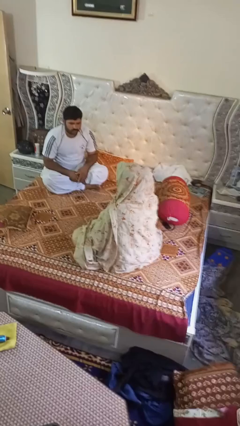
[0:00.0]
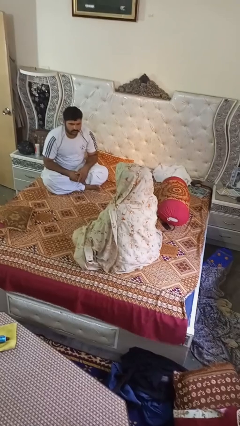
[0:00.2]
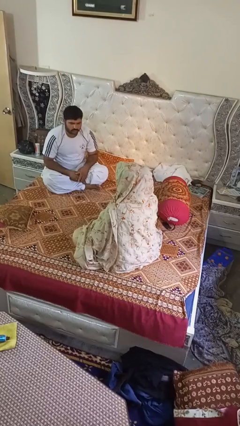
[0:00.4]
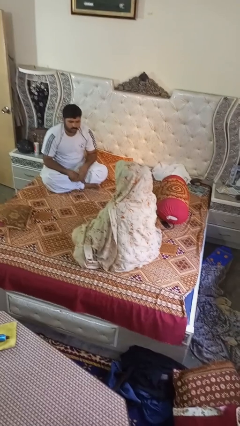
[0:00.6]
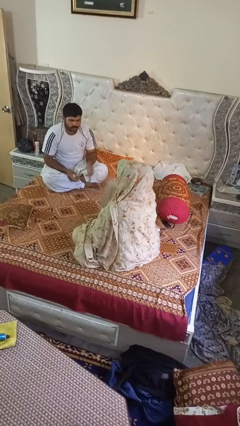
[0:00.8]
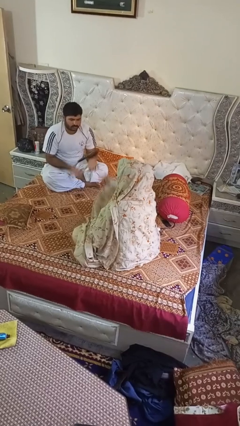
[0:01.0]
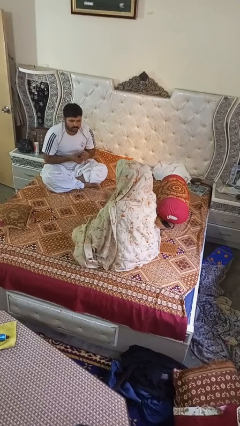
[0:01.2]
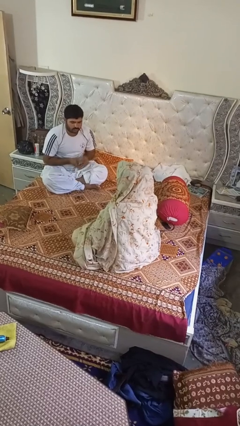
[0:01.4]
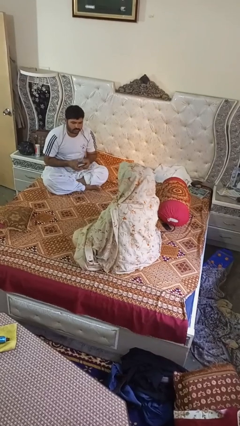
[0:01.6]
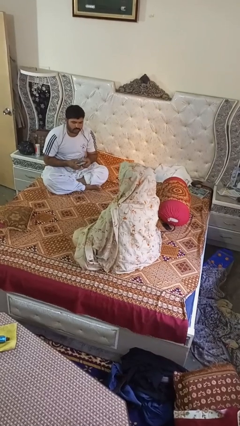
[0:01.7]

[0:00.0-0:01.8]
person throws object to person

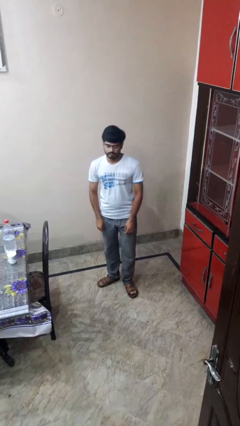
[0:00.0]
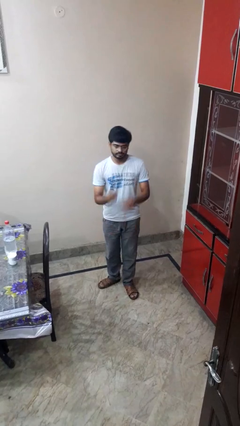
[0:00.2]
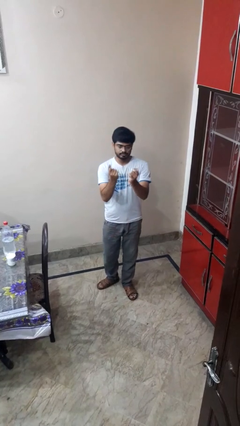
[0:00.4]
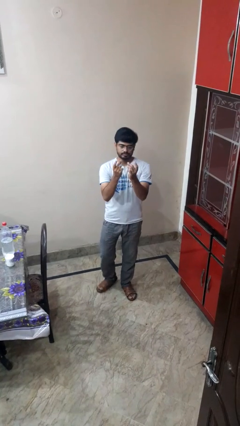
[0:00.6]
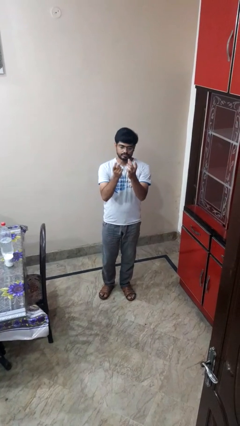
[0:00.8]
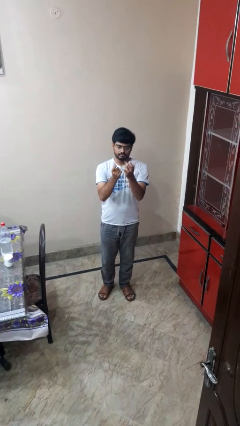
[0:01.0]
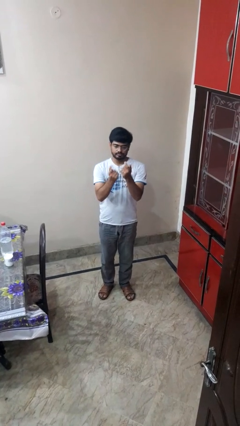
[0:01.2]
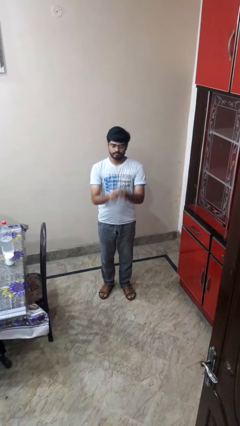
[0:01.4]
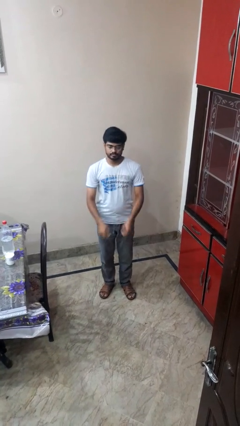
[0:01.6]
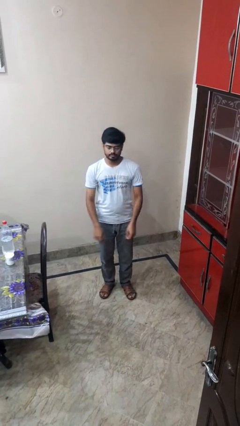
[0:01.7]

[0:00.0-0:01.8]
person snaps fingers

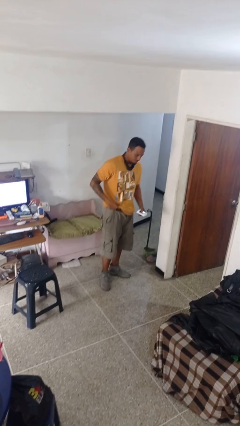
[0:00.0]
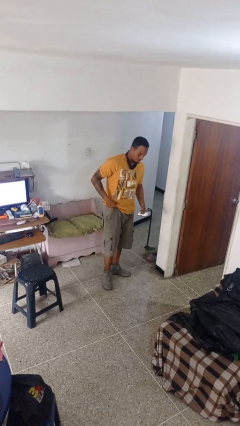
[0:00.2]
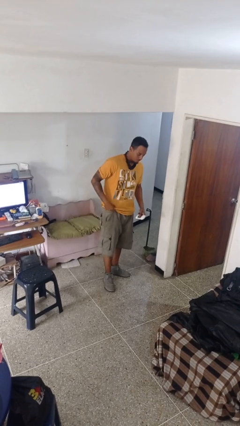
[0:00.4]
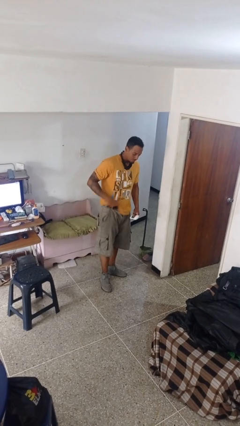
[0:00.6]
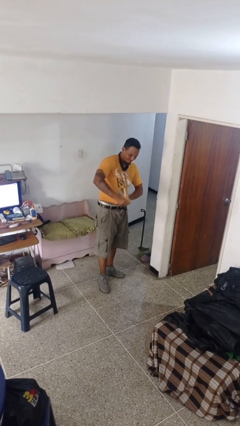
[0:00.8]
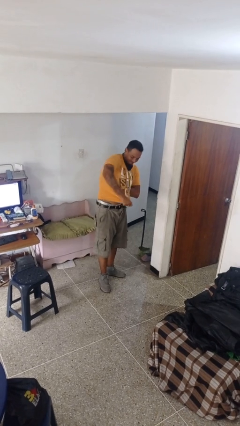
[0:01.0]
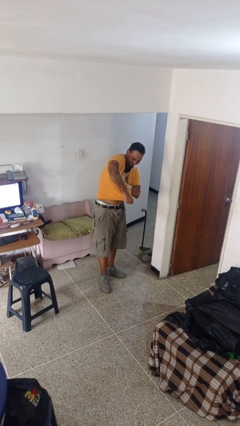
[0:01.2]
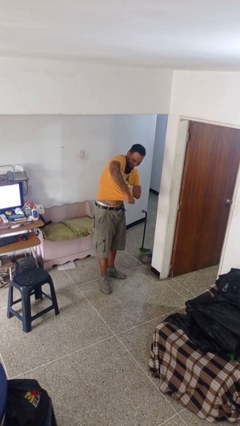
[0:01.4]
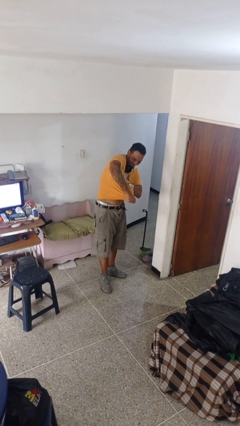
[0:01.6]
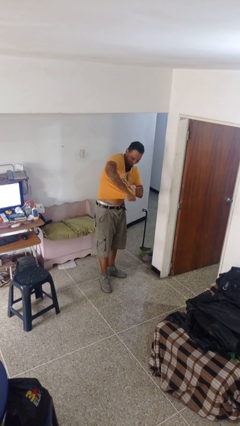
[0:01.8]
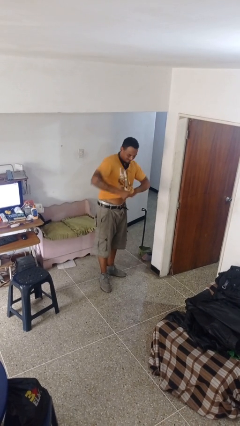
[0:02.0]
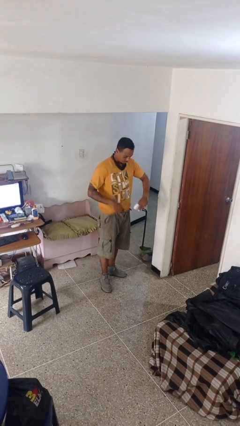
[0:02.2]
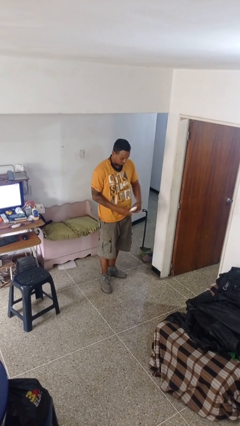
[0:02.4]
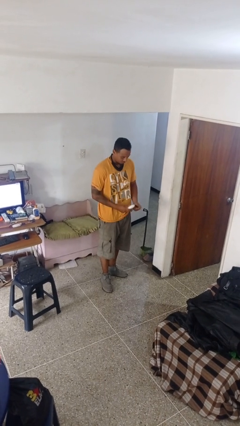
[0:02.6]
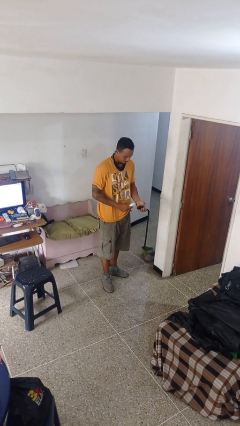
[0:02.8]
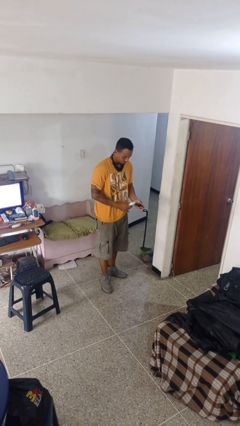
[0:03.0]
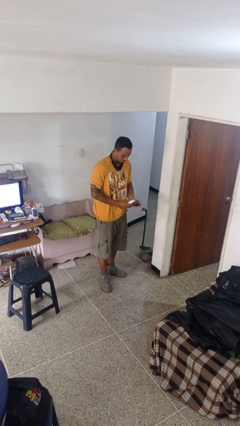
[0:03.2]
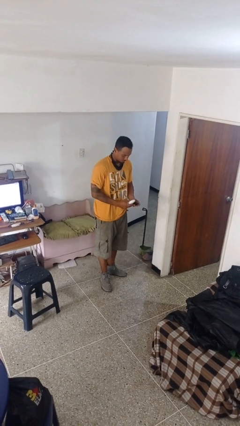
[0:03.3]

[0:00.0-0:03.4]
person applies deodorant

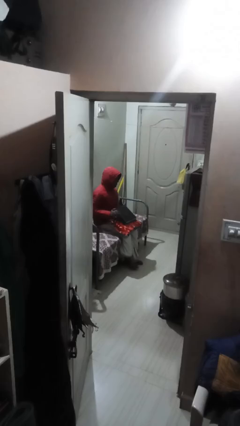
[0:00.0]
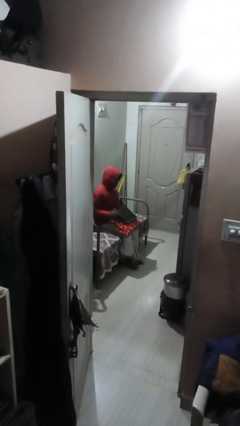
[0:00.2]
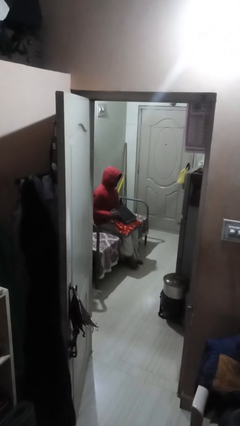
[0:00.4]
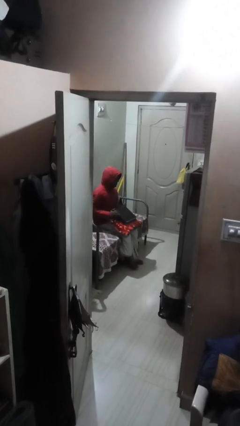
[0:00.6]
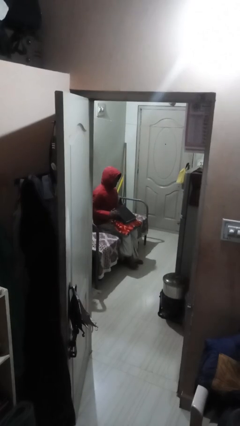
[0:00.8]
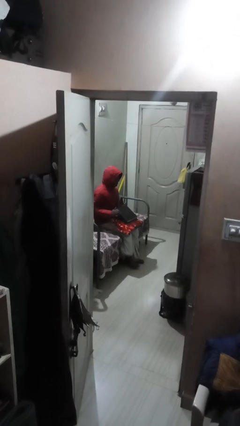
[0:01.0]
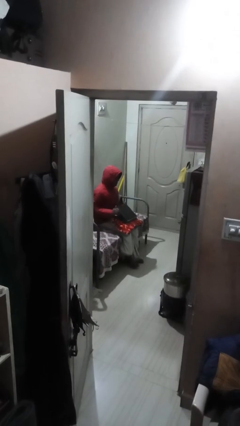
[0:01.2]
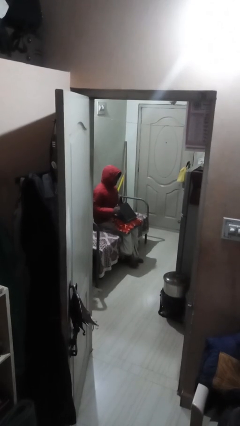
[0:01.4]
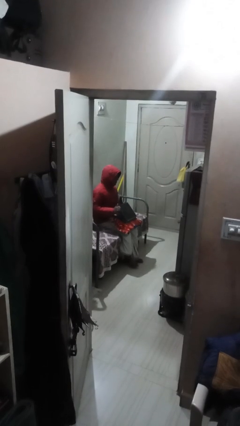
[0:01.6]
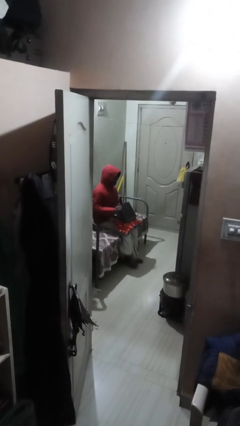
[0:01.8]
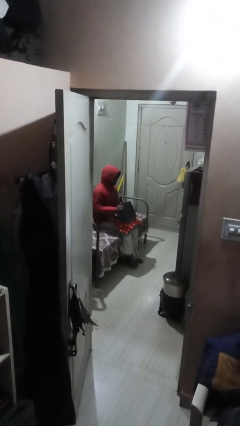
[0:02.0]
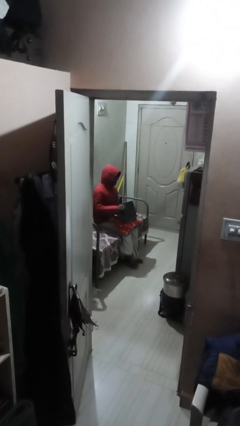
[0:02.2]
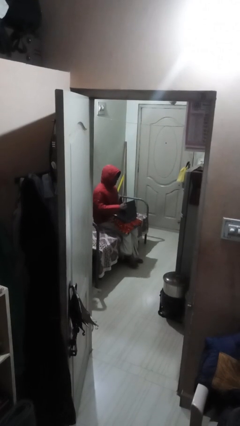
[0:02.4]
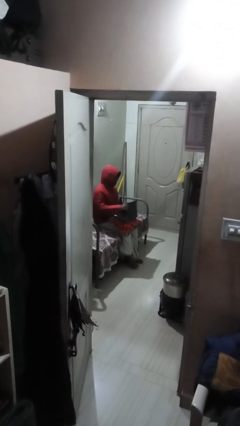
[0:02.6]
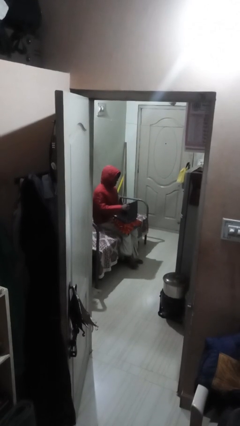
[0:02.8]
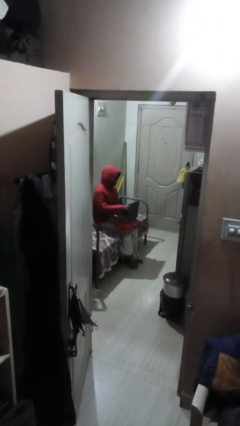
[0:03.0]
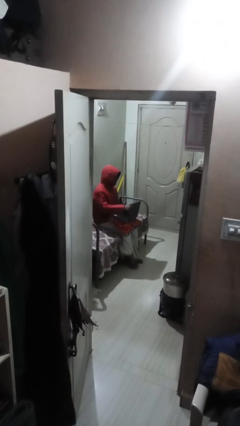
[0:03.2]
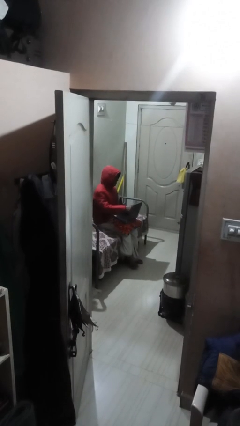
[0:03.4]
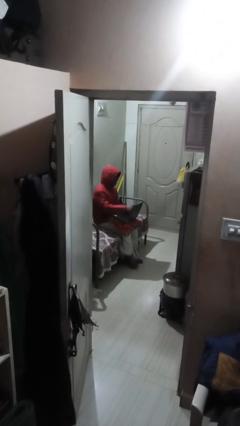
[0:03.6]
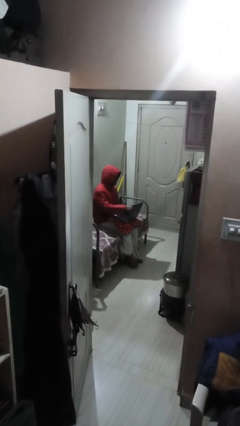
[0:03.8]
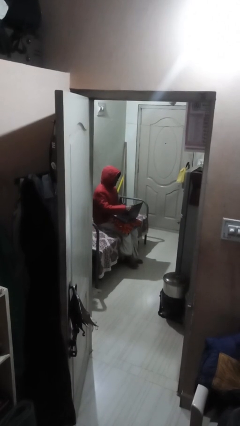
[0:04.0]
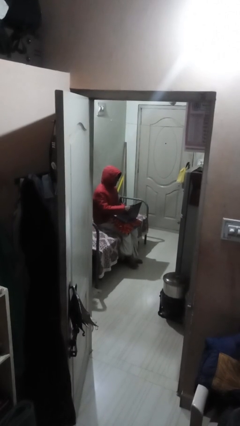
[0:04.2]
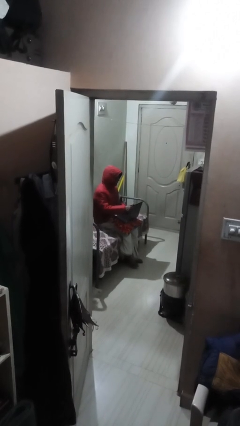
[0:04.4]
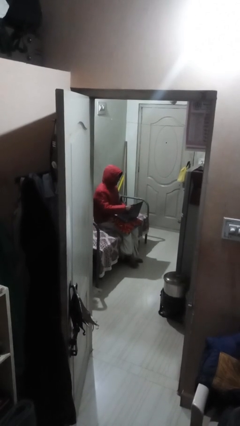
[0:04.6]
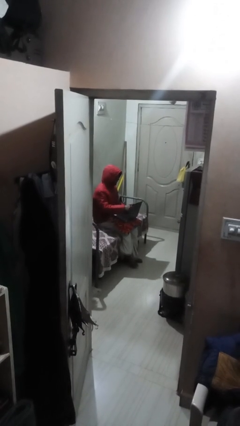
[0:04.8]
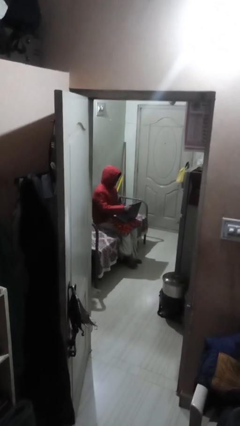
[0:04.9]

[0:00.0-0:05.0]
person interacts with laptop

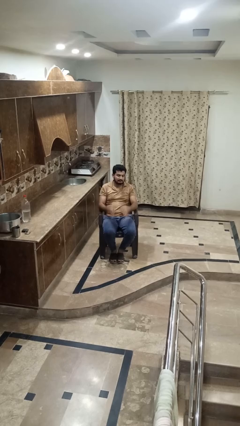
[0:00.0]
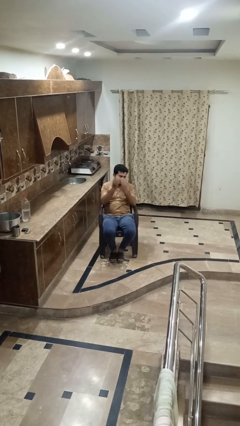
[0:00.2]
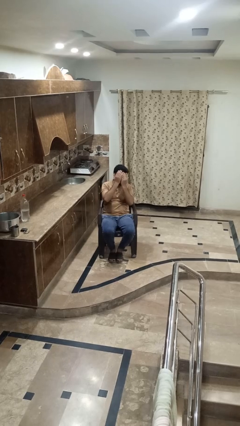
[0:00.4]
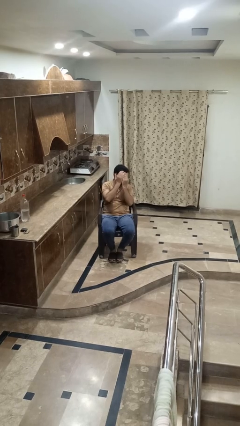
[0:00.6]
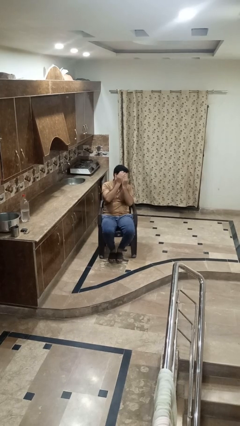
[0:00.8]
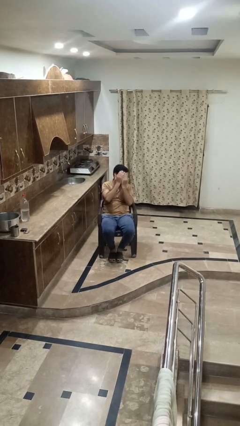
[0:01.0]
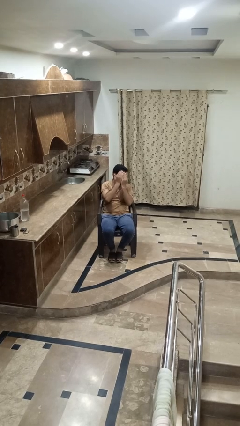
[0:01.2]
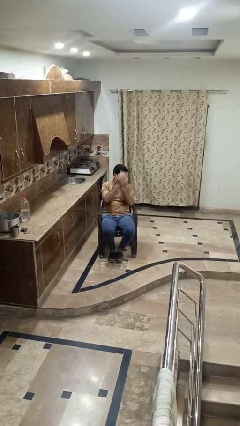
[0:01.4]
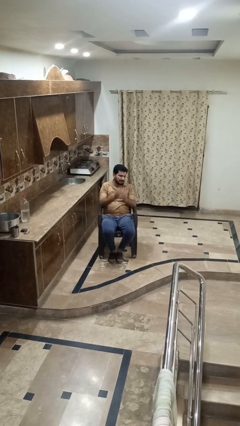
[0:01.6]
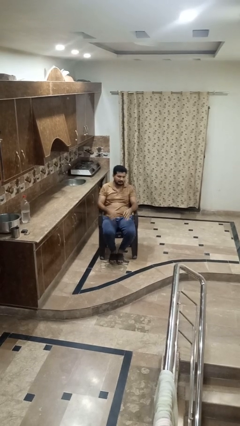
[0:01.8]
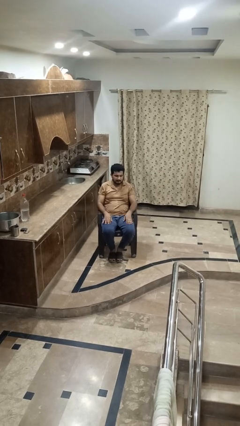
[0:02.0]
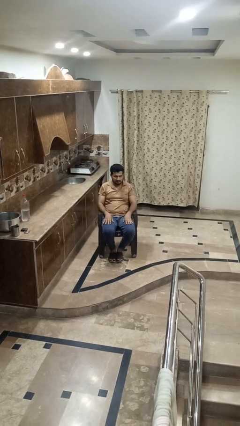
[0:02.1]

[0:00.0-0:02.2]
person covers face with hands

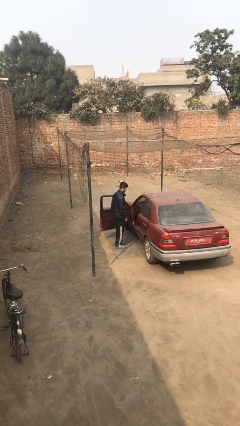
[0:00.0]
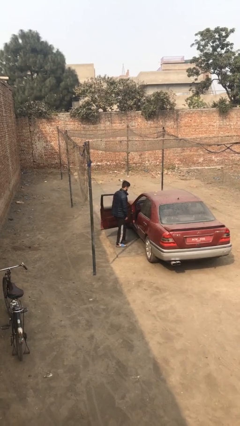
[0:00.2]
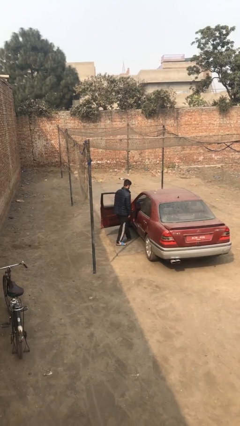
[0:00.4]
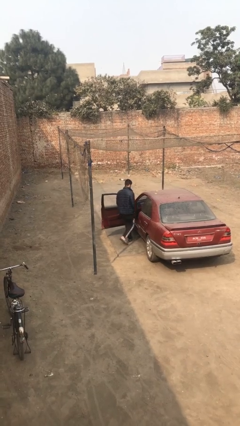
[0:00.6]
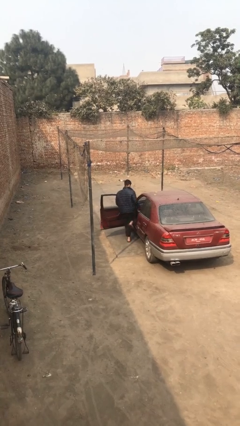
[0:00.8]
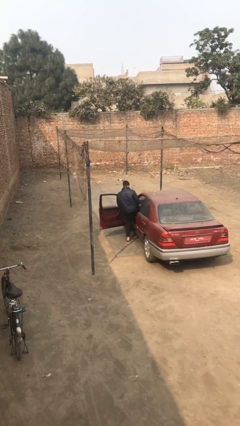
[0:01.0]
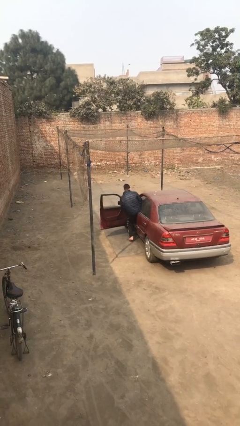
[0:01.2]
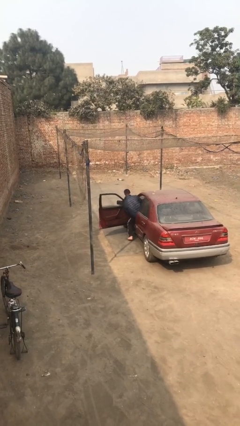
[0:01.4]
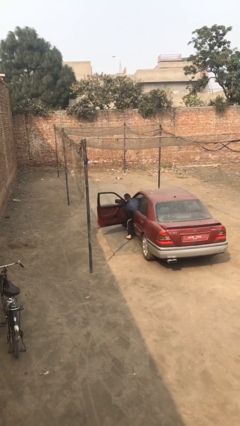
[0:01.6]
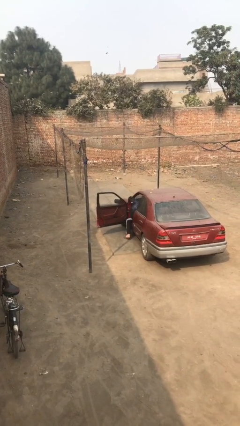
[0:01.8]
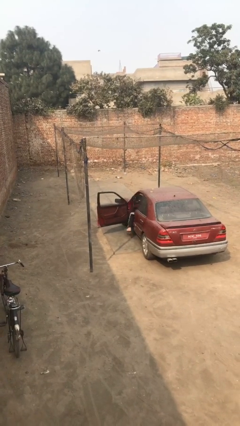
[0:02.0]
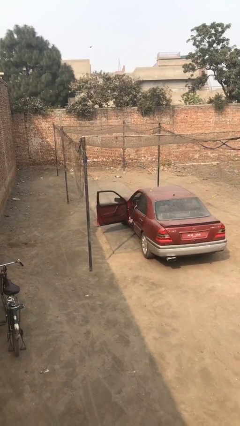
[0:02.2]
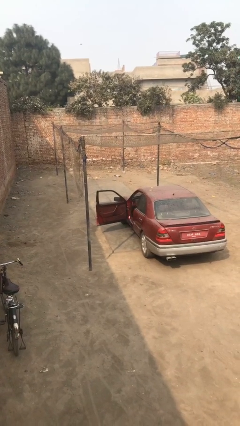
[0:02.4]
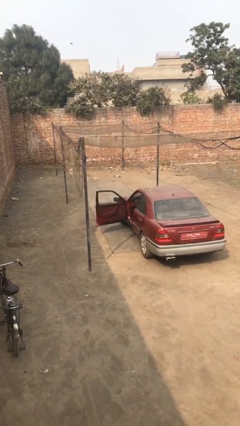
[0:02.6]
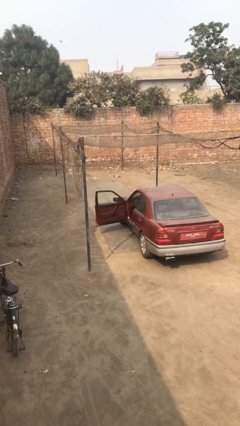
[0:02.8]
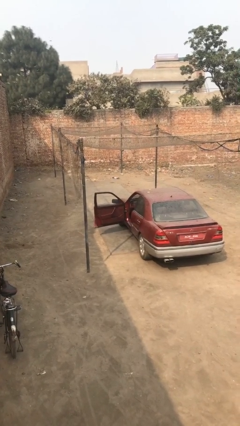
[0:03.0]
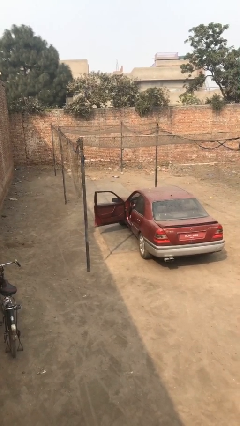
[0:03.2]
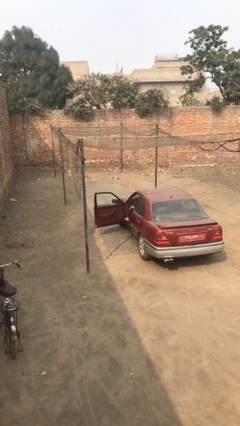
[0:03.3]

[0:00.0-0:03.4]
person enters car
